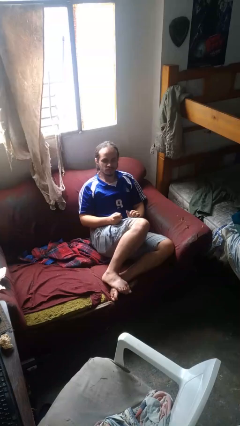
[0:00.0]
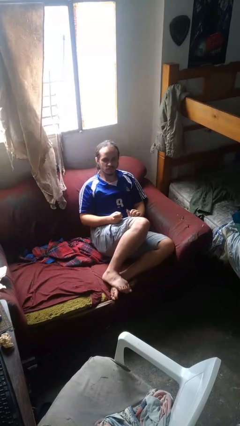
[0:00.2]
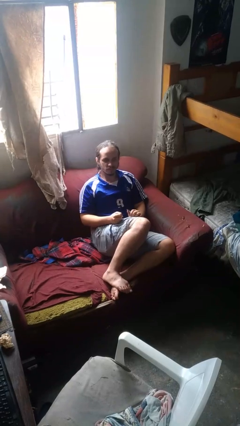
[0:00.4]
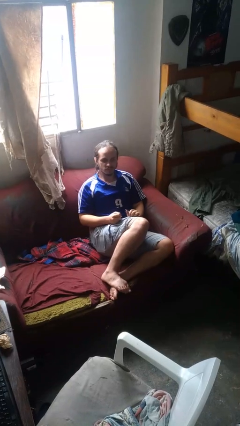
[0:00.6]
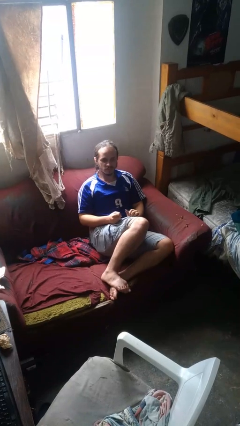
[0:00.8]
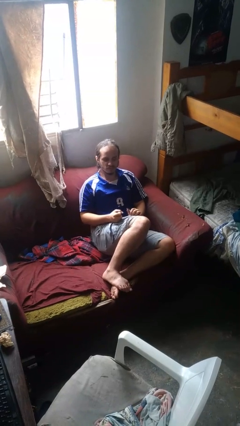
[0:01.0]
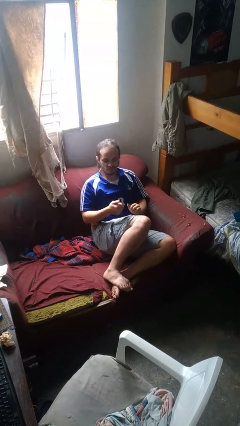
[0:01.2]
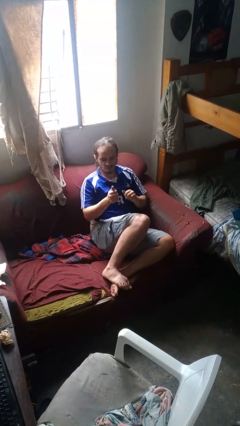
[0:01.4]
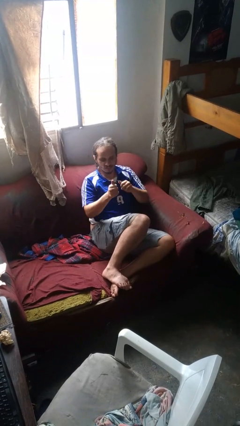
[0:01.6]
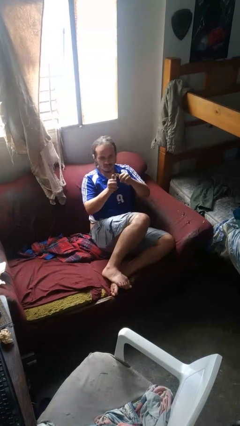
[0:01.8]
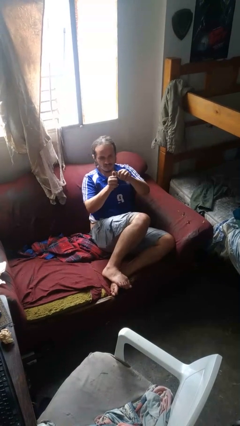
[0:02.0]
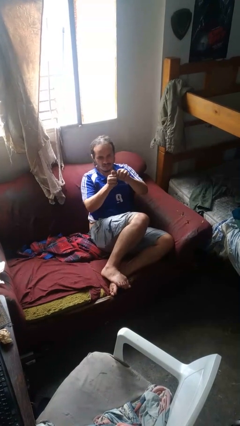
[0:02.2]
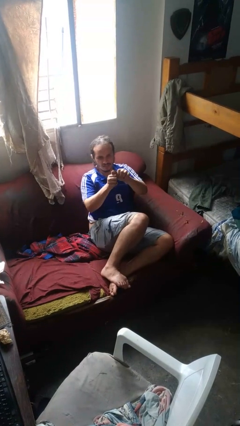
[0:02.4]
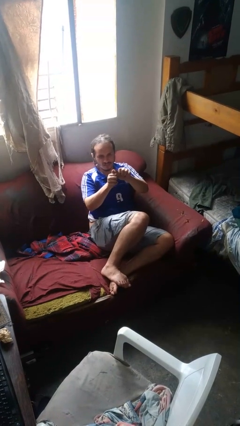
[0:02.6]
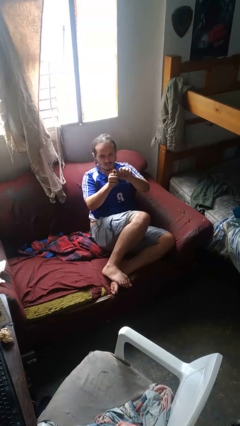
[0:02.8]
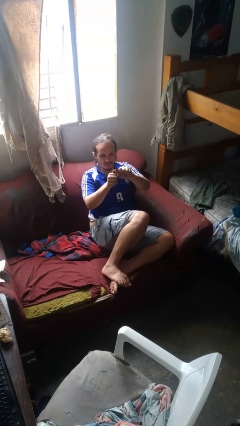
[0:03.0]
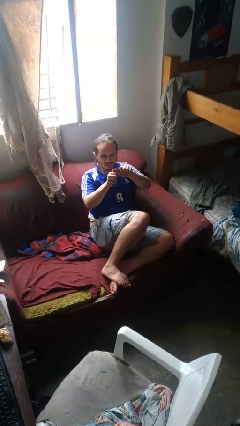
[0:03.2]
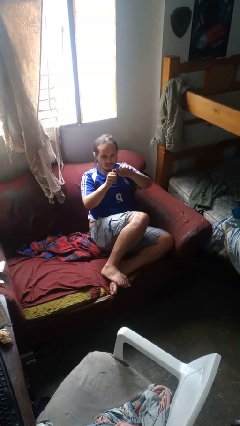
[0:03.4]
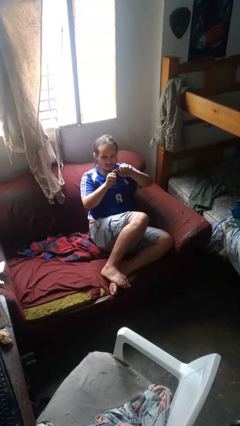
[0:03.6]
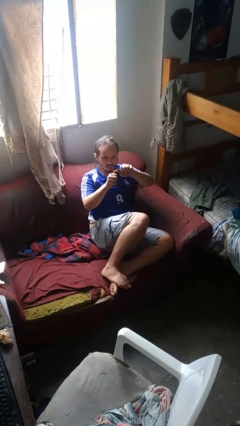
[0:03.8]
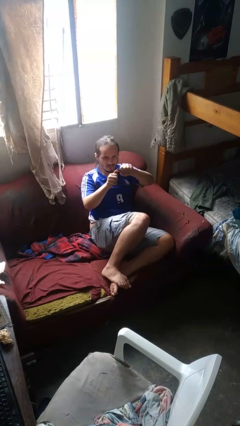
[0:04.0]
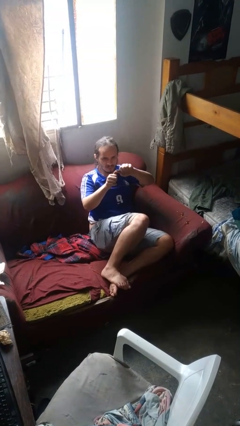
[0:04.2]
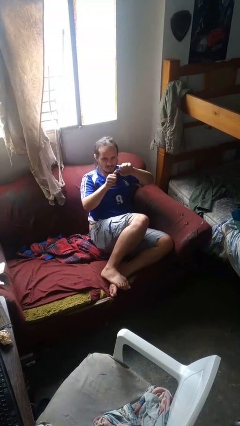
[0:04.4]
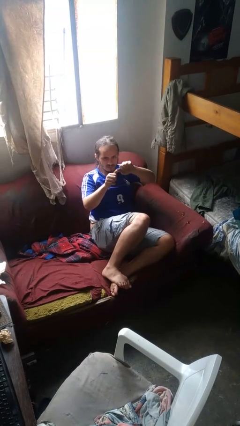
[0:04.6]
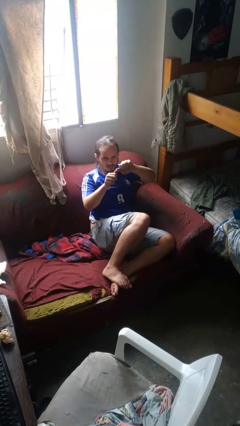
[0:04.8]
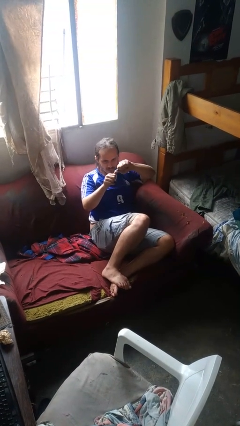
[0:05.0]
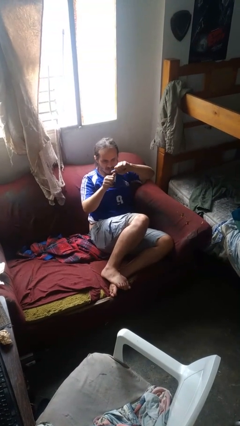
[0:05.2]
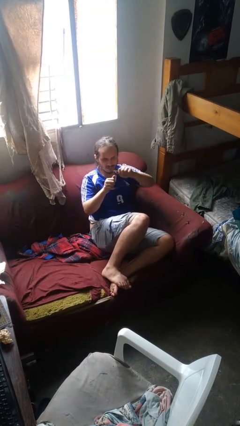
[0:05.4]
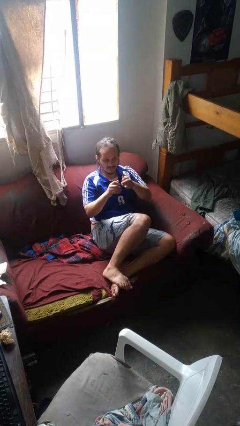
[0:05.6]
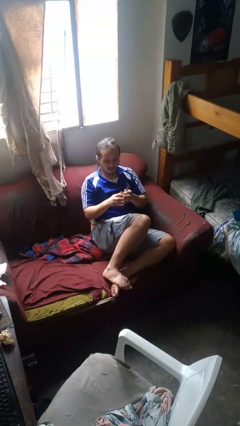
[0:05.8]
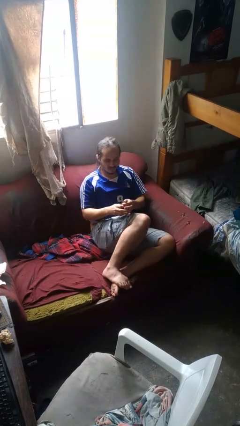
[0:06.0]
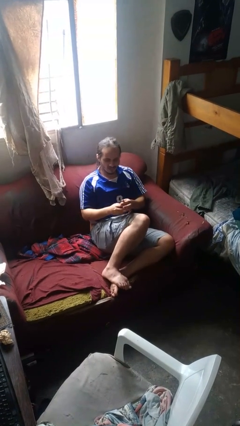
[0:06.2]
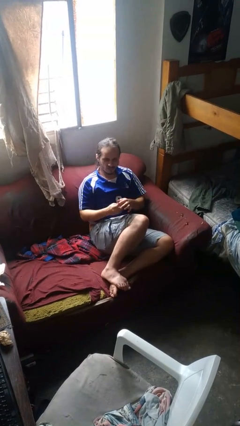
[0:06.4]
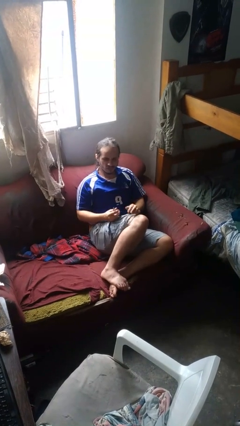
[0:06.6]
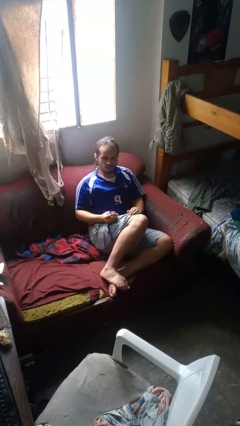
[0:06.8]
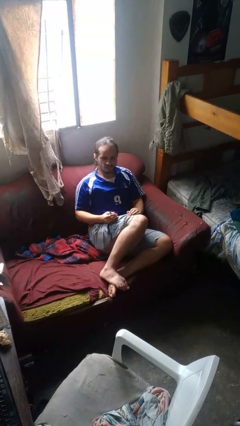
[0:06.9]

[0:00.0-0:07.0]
person clips fingernails

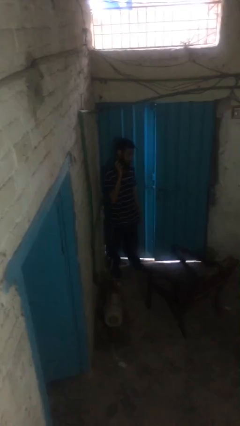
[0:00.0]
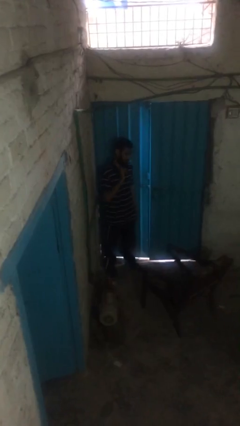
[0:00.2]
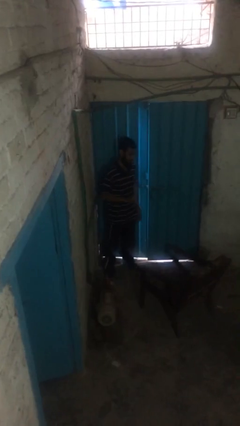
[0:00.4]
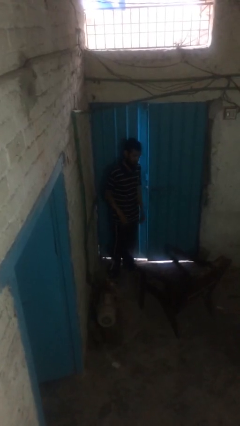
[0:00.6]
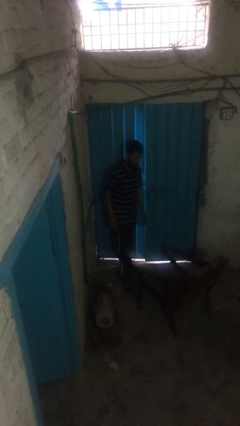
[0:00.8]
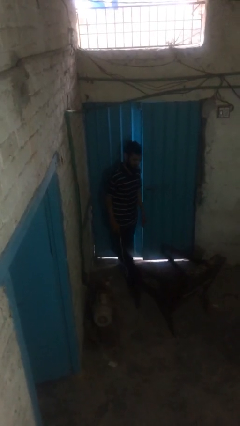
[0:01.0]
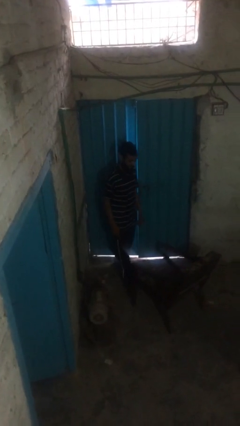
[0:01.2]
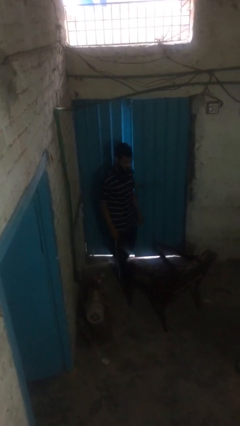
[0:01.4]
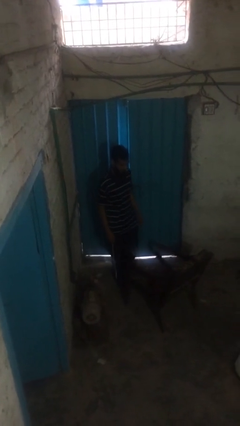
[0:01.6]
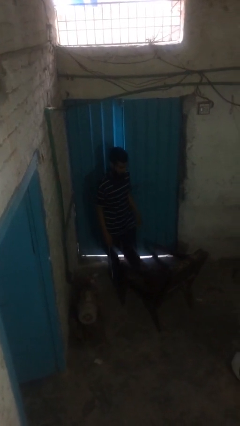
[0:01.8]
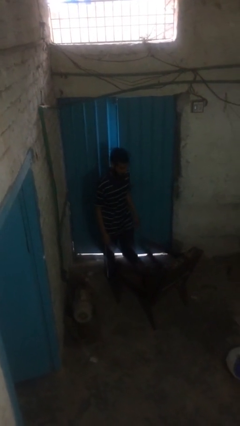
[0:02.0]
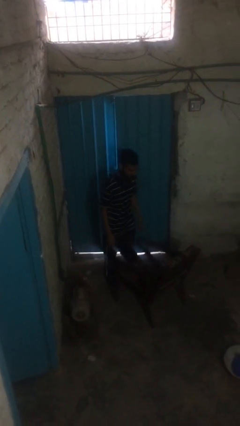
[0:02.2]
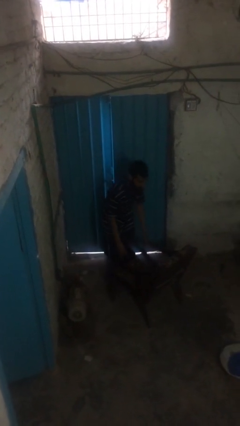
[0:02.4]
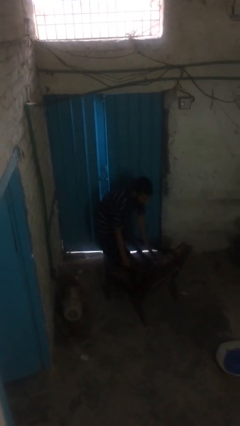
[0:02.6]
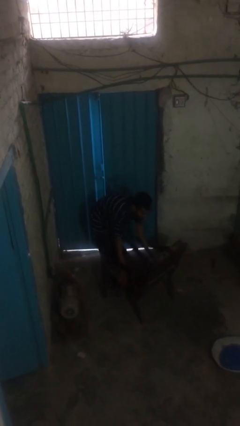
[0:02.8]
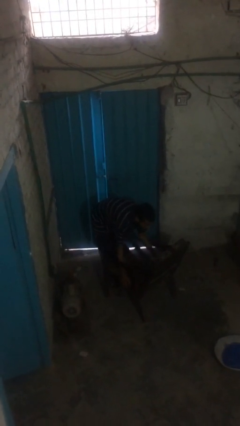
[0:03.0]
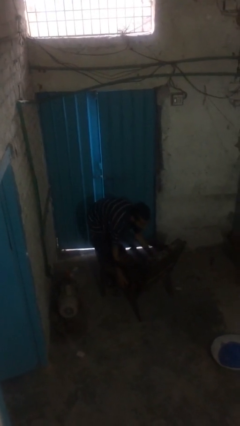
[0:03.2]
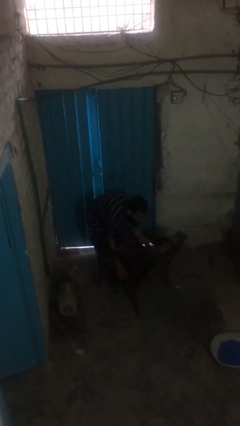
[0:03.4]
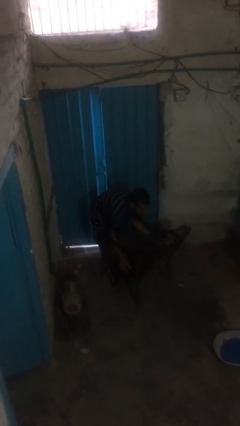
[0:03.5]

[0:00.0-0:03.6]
person picks up object from floor

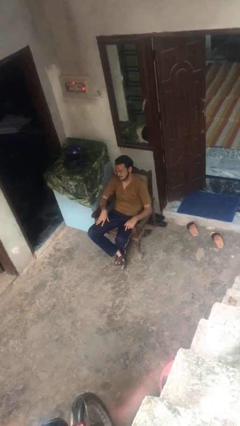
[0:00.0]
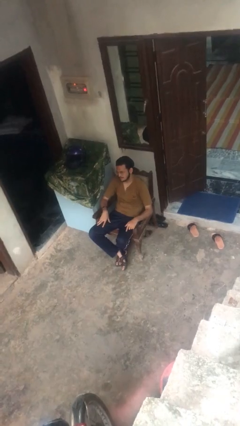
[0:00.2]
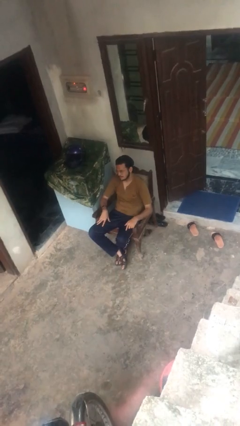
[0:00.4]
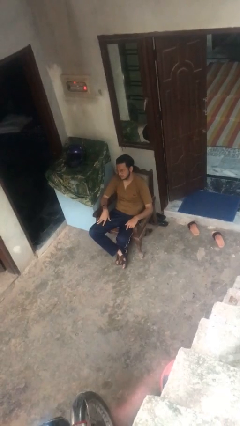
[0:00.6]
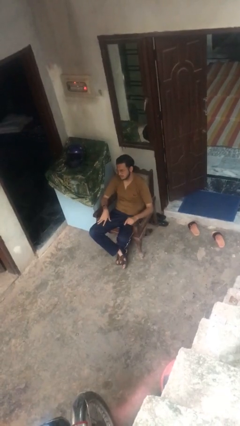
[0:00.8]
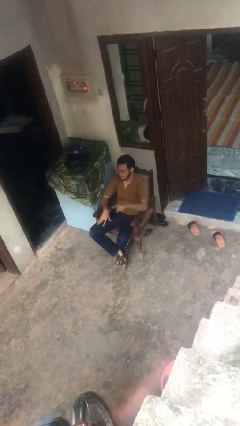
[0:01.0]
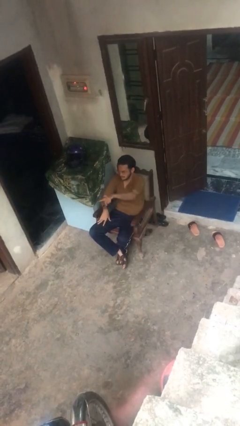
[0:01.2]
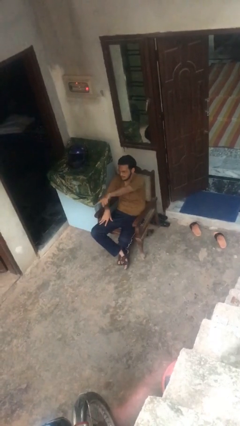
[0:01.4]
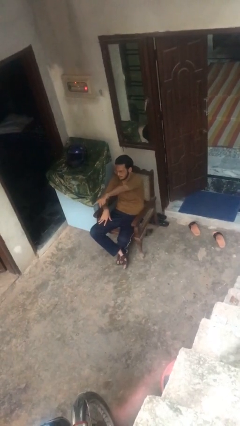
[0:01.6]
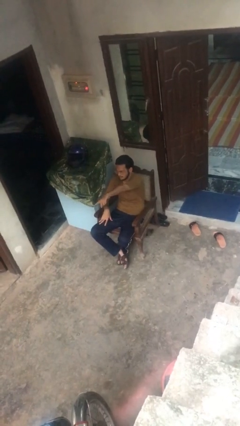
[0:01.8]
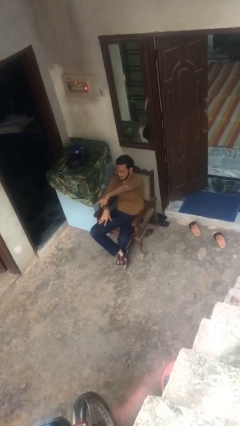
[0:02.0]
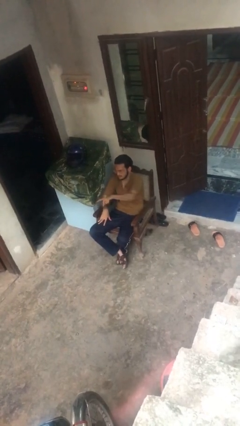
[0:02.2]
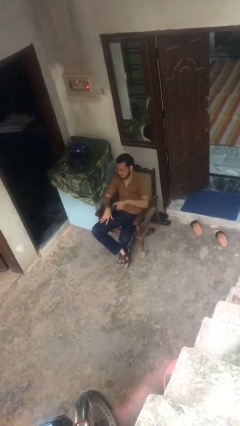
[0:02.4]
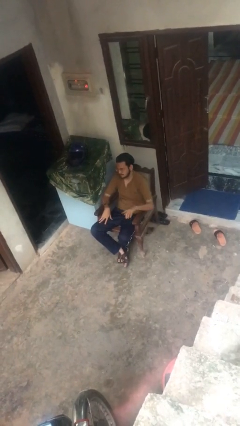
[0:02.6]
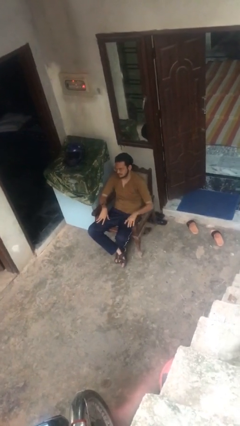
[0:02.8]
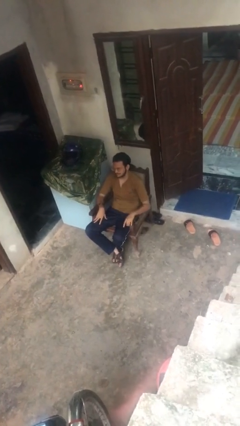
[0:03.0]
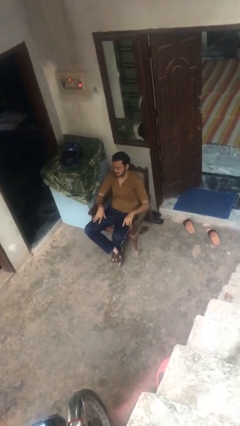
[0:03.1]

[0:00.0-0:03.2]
person points at person

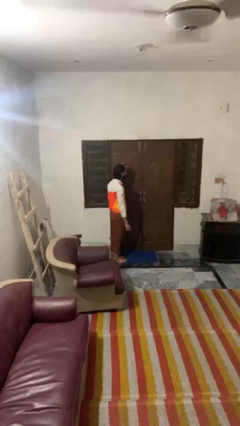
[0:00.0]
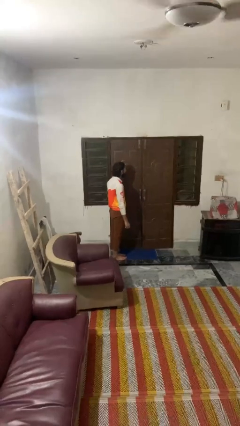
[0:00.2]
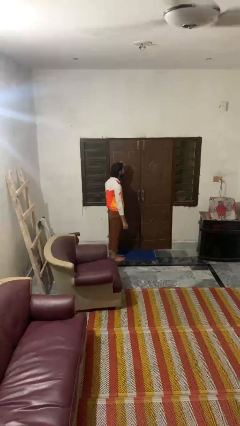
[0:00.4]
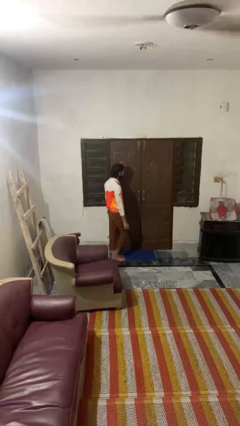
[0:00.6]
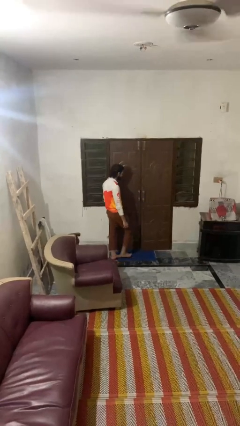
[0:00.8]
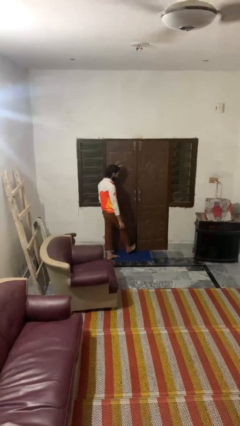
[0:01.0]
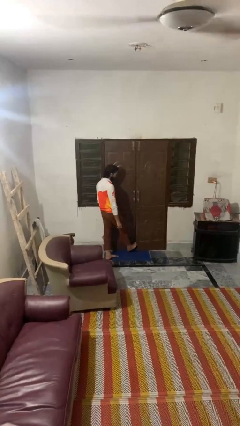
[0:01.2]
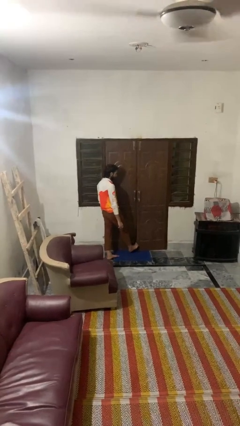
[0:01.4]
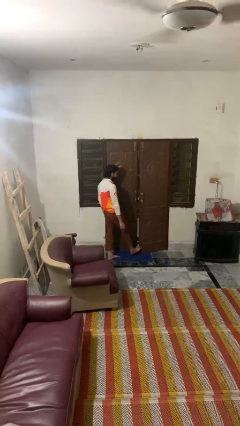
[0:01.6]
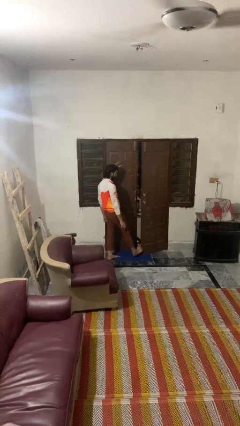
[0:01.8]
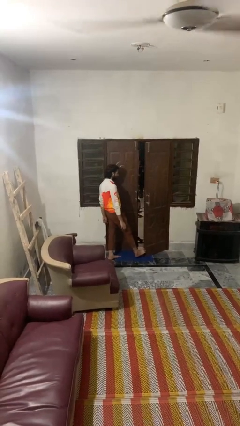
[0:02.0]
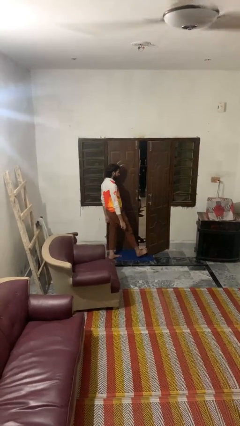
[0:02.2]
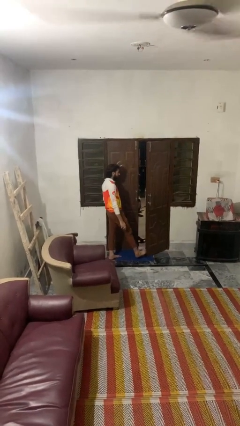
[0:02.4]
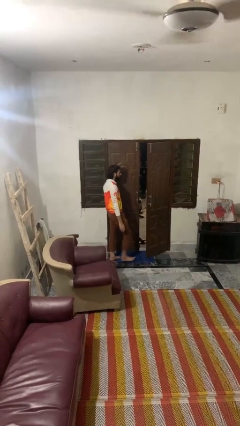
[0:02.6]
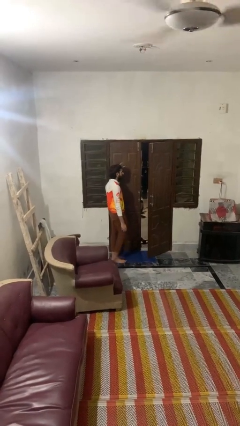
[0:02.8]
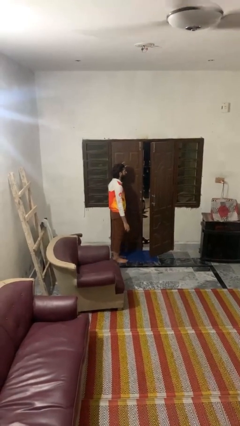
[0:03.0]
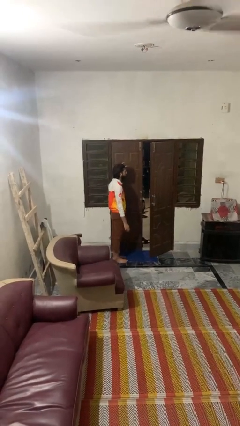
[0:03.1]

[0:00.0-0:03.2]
person opens facility door

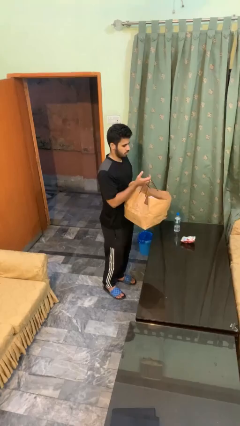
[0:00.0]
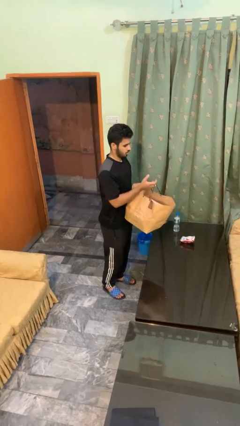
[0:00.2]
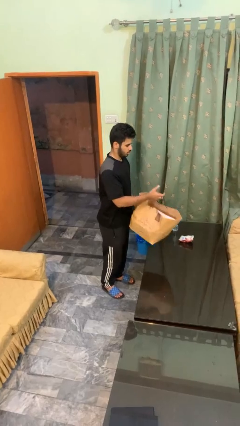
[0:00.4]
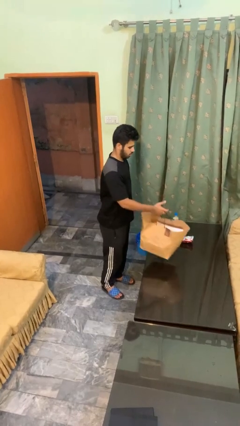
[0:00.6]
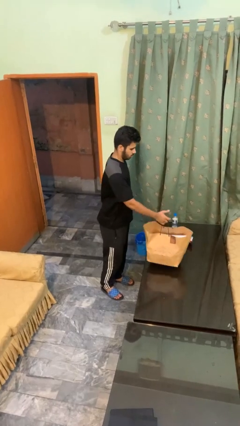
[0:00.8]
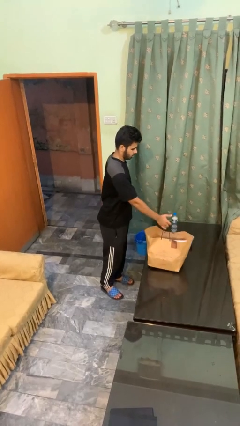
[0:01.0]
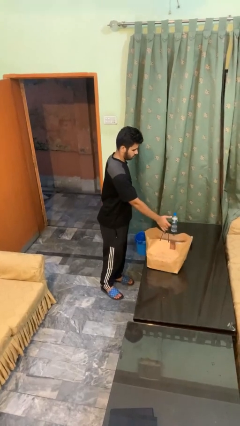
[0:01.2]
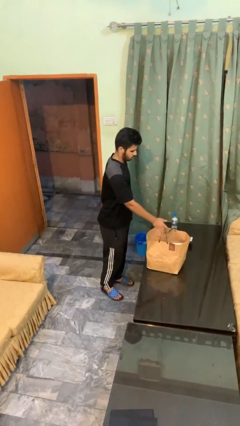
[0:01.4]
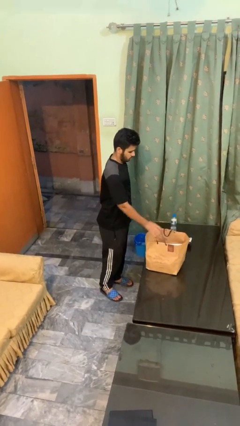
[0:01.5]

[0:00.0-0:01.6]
person puts down object on countertop
